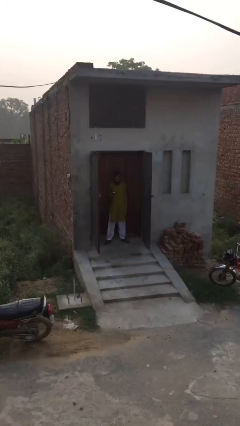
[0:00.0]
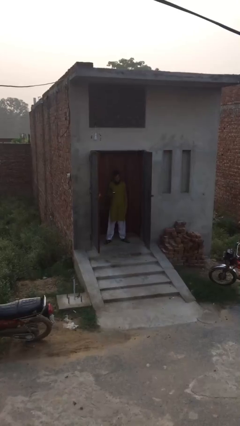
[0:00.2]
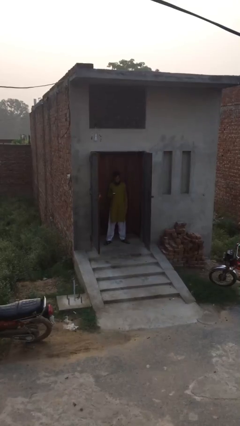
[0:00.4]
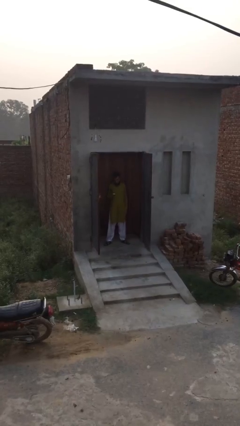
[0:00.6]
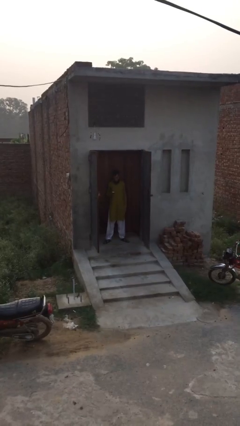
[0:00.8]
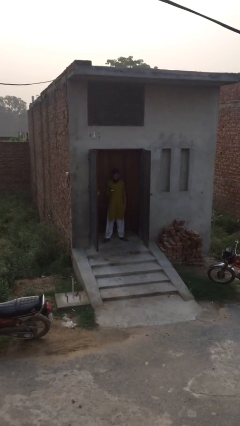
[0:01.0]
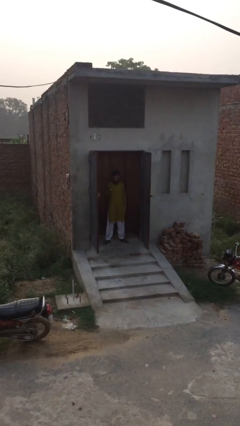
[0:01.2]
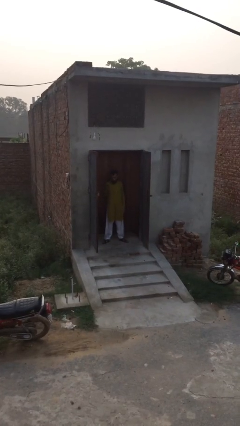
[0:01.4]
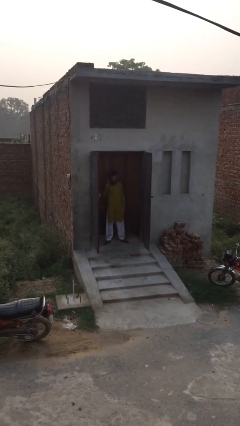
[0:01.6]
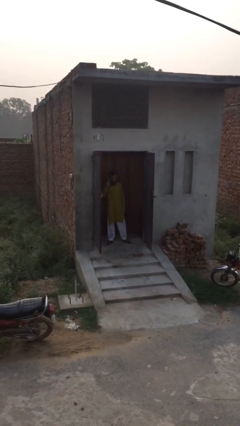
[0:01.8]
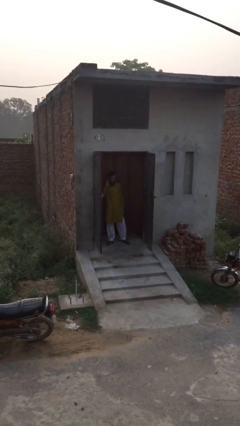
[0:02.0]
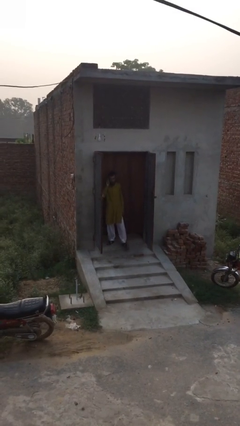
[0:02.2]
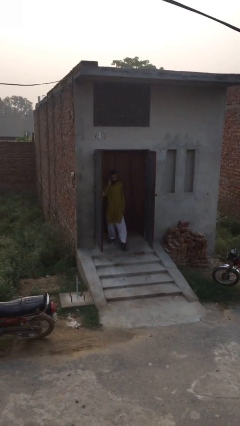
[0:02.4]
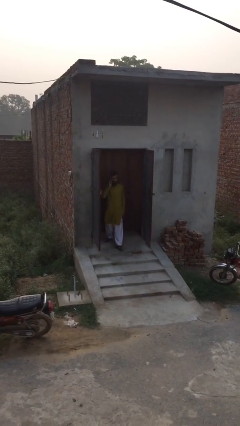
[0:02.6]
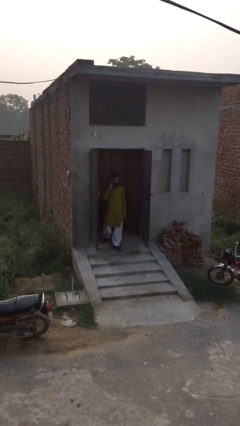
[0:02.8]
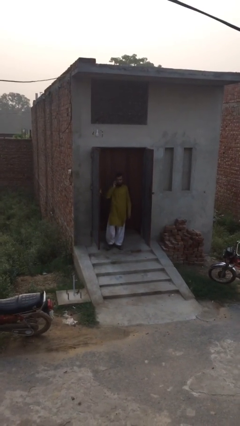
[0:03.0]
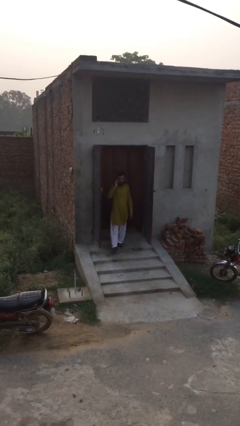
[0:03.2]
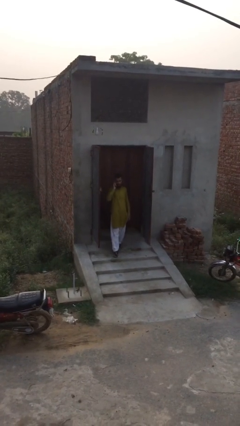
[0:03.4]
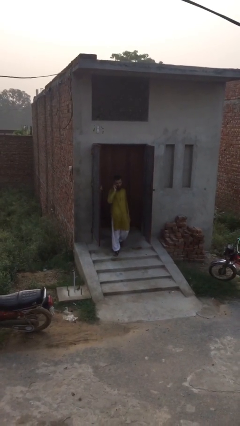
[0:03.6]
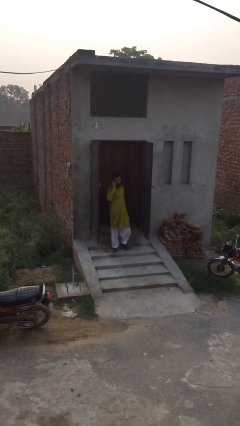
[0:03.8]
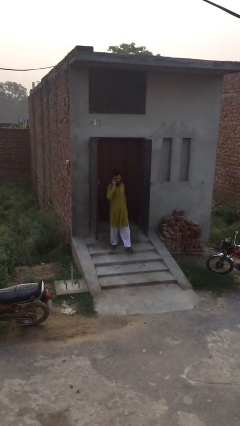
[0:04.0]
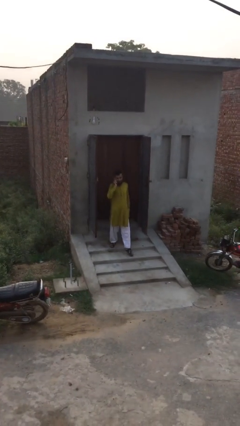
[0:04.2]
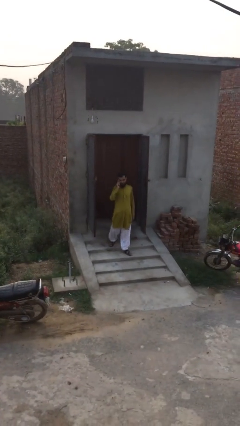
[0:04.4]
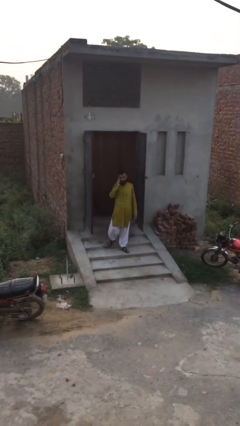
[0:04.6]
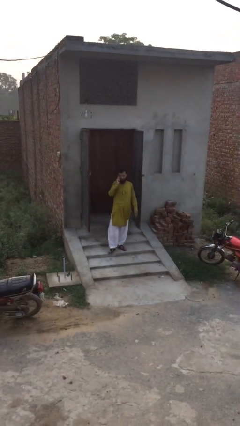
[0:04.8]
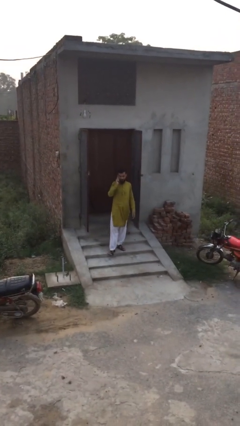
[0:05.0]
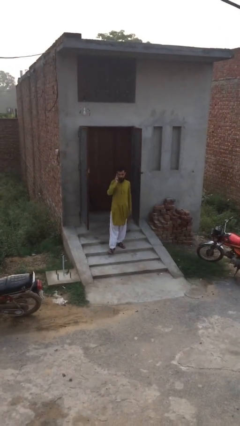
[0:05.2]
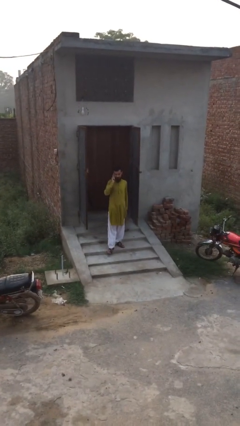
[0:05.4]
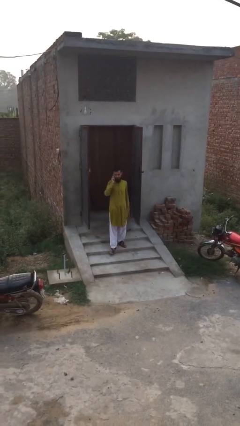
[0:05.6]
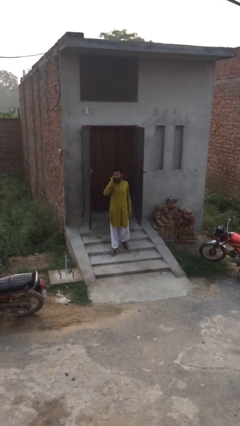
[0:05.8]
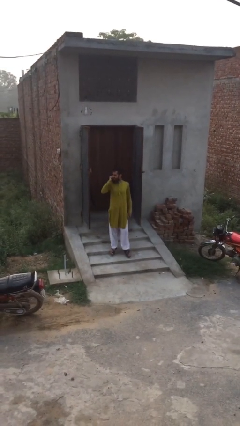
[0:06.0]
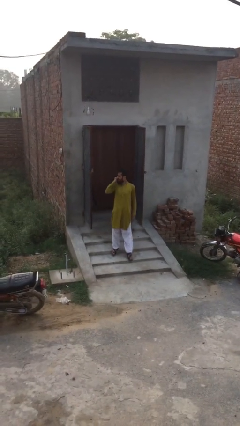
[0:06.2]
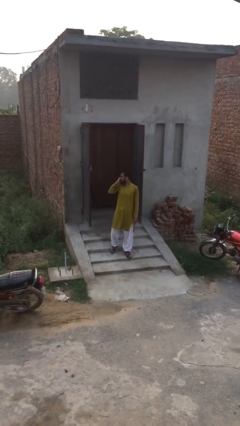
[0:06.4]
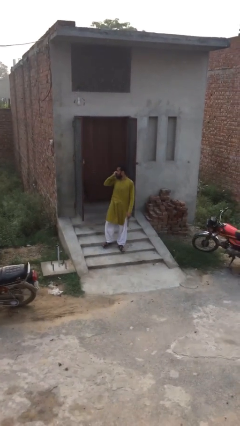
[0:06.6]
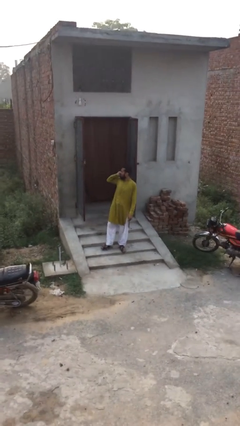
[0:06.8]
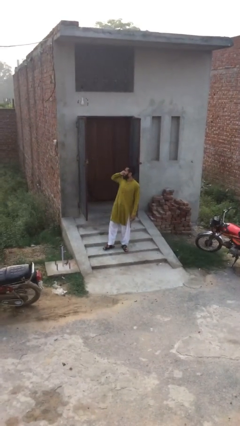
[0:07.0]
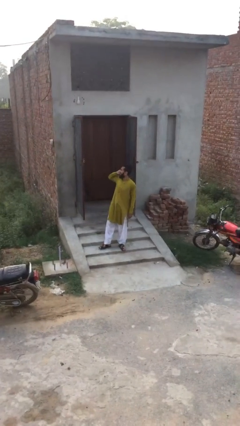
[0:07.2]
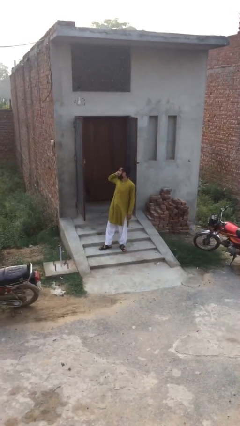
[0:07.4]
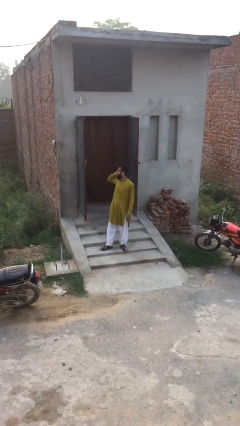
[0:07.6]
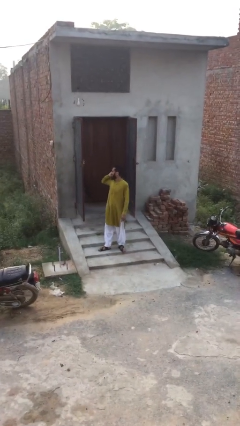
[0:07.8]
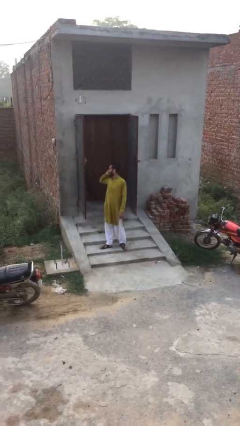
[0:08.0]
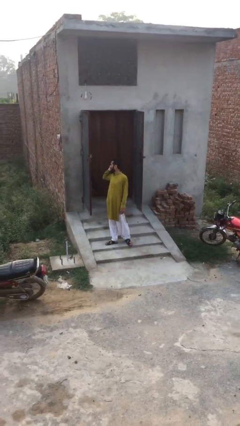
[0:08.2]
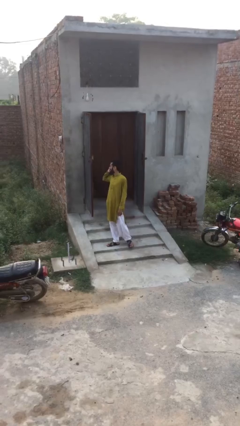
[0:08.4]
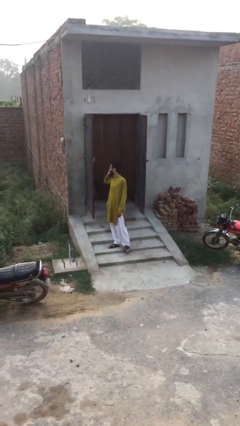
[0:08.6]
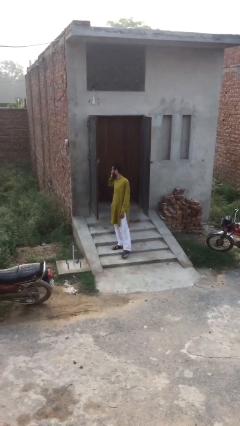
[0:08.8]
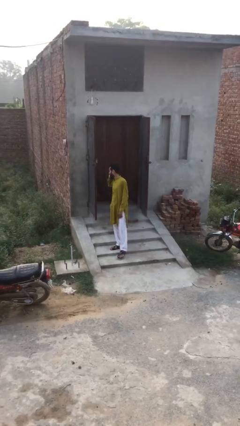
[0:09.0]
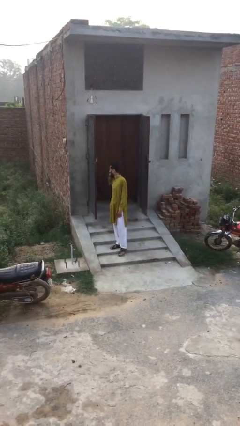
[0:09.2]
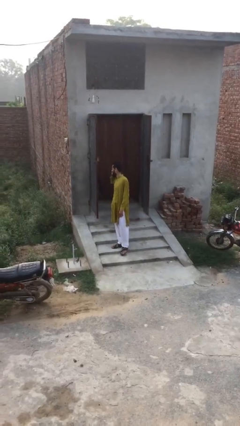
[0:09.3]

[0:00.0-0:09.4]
person enters scene through structure

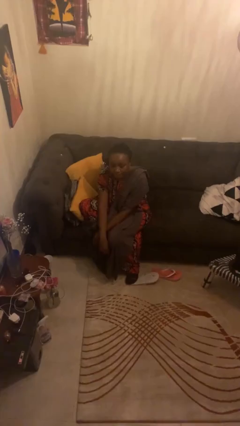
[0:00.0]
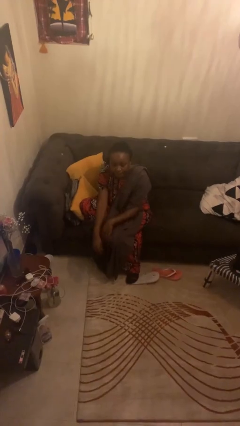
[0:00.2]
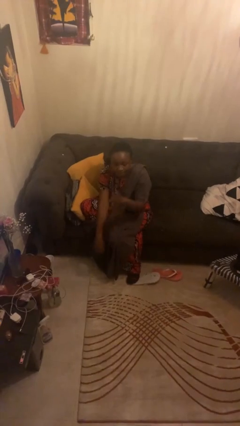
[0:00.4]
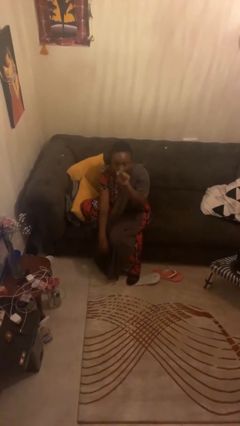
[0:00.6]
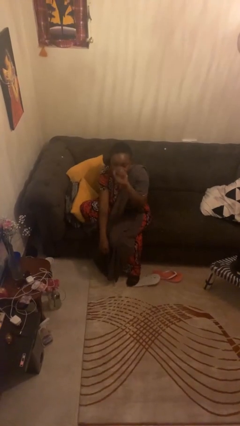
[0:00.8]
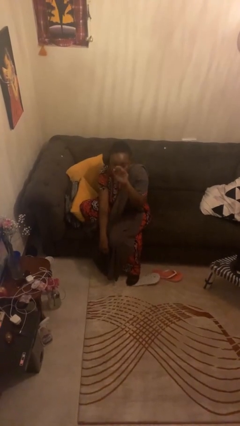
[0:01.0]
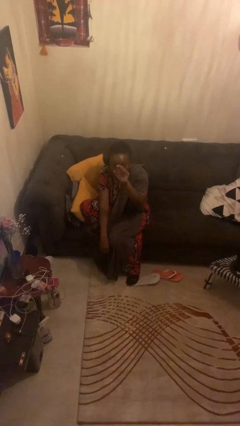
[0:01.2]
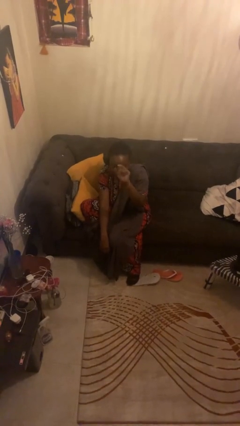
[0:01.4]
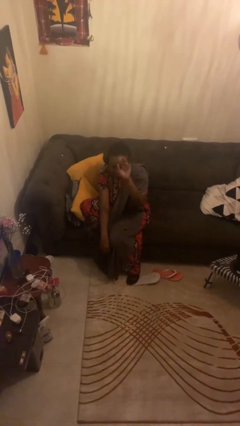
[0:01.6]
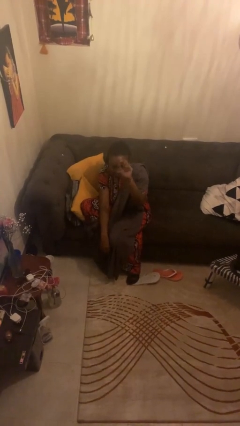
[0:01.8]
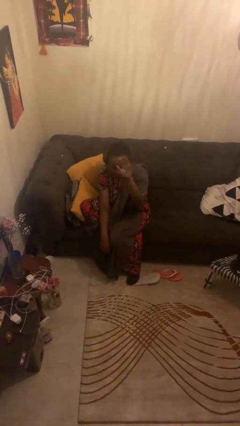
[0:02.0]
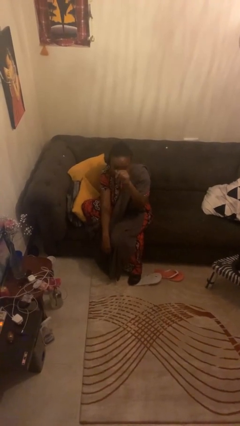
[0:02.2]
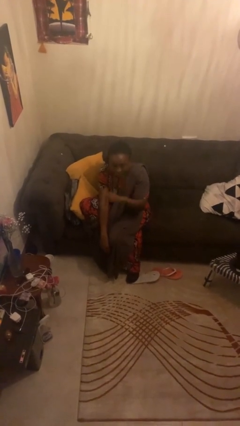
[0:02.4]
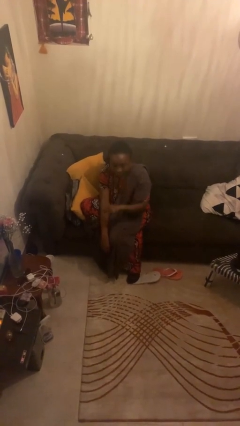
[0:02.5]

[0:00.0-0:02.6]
person gestures come here

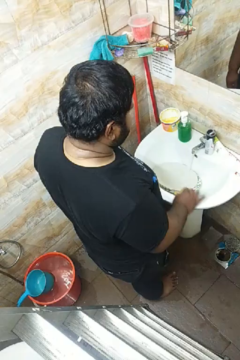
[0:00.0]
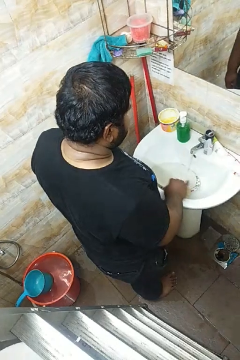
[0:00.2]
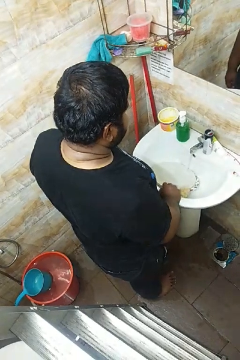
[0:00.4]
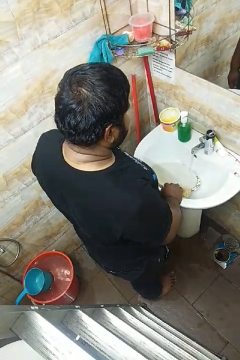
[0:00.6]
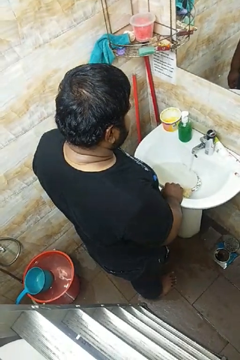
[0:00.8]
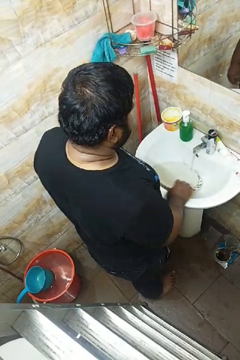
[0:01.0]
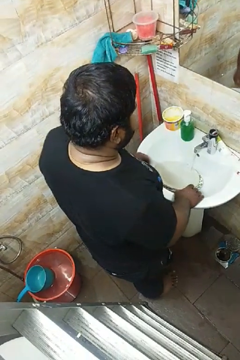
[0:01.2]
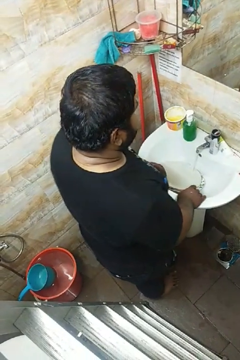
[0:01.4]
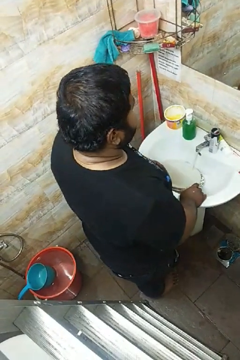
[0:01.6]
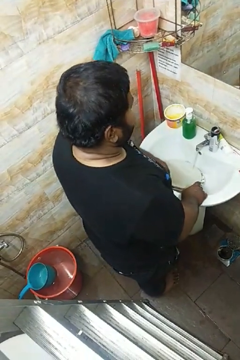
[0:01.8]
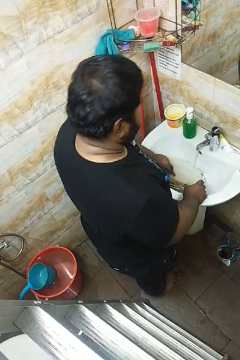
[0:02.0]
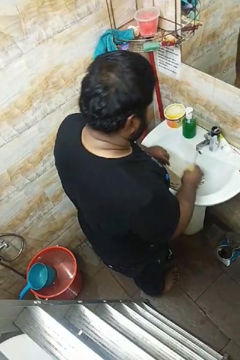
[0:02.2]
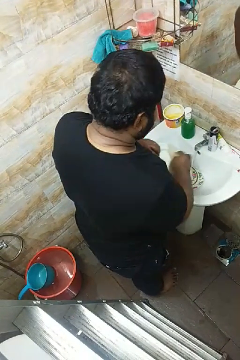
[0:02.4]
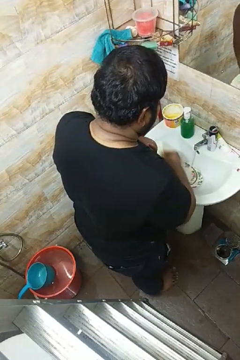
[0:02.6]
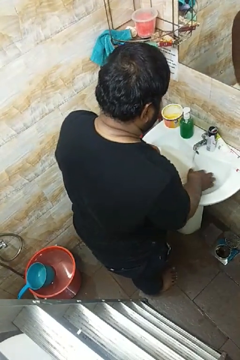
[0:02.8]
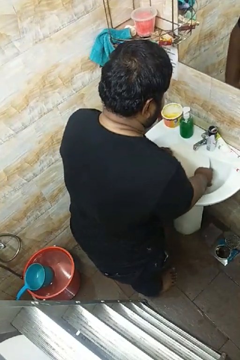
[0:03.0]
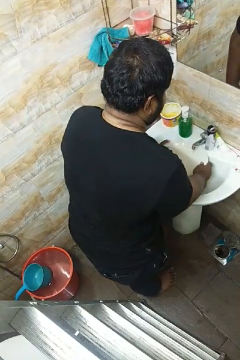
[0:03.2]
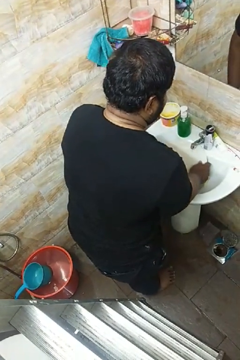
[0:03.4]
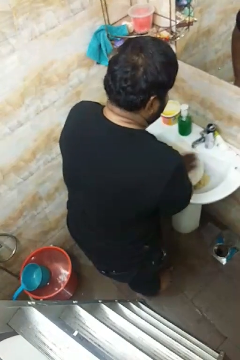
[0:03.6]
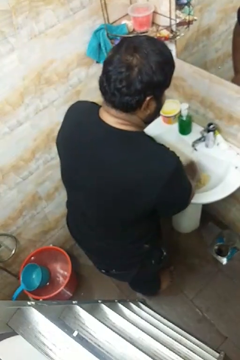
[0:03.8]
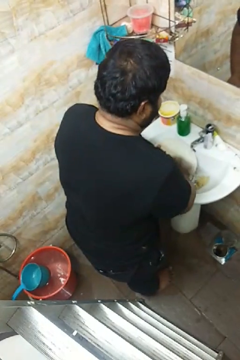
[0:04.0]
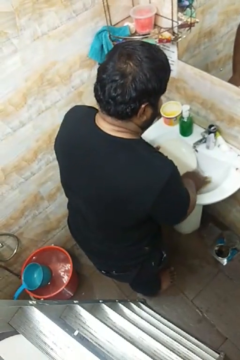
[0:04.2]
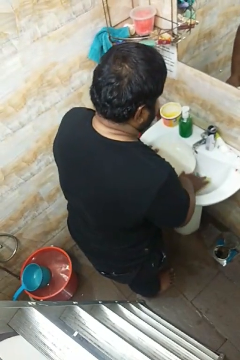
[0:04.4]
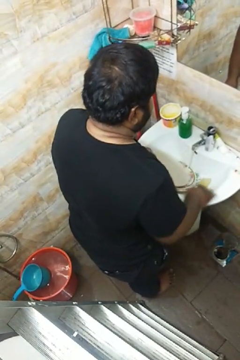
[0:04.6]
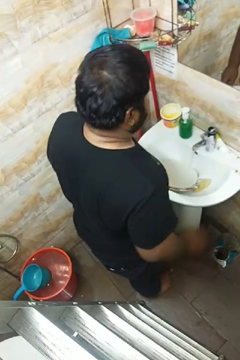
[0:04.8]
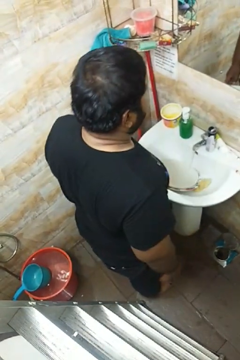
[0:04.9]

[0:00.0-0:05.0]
person washes dish

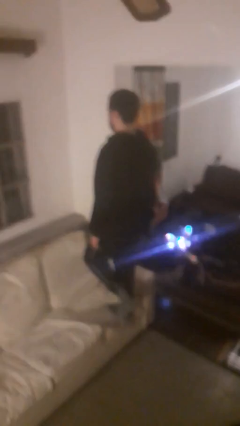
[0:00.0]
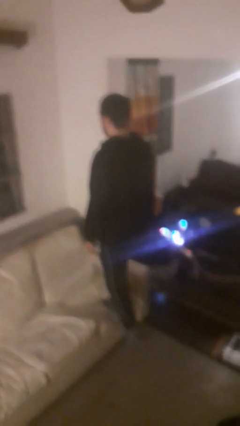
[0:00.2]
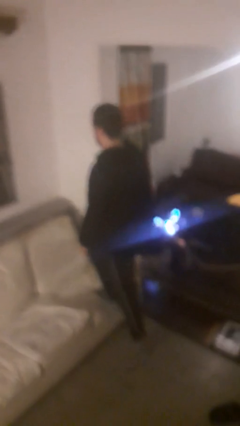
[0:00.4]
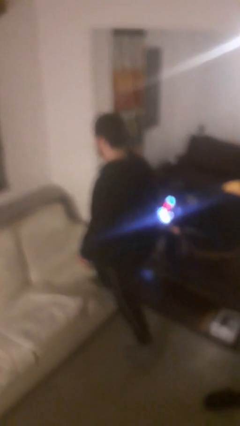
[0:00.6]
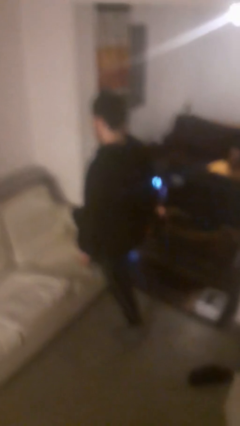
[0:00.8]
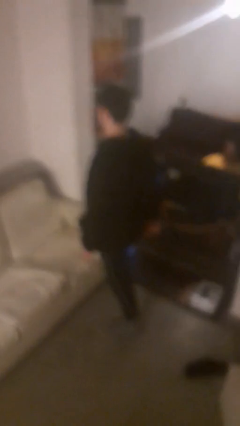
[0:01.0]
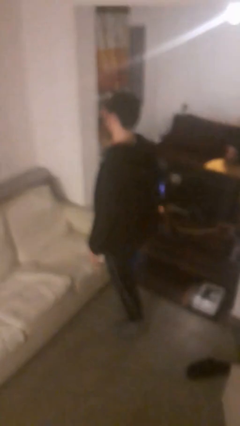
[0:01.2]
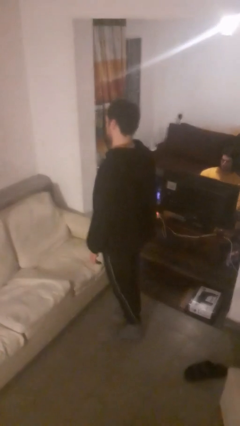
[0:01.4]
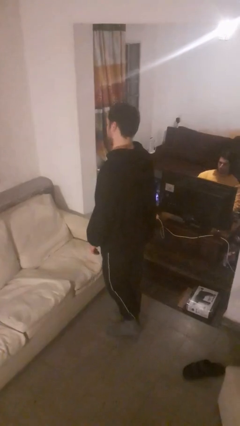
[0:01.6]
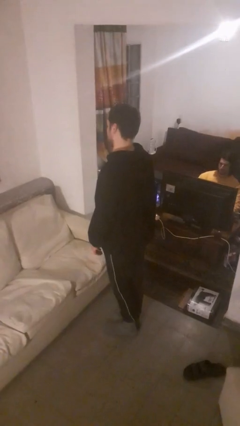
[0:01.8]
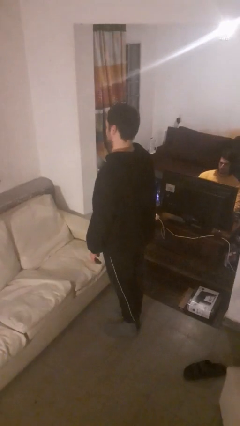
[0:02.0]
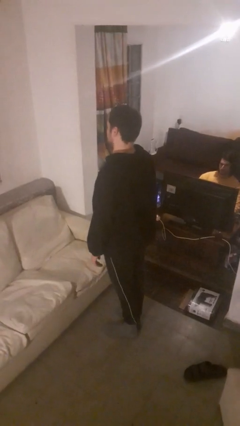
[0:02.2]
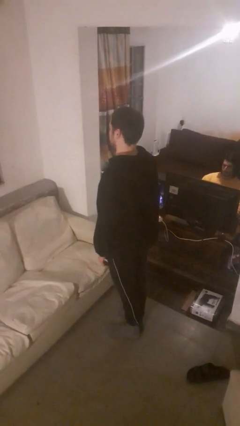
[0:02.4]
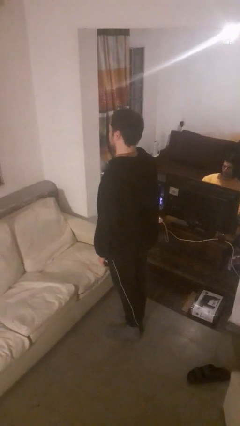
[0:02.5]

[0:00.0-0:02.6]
person climbs off couch
